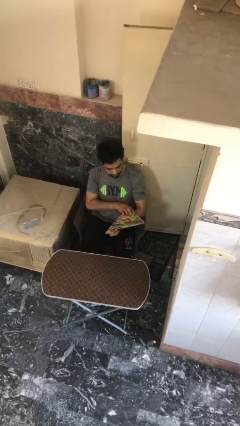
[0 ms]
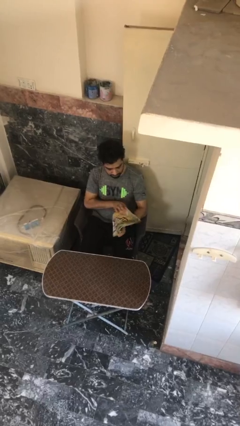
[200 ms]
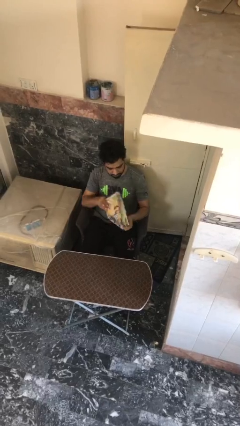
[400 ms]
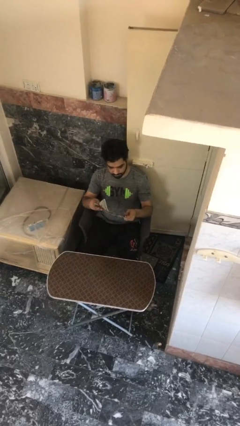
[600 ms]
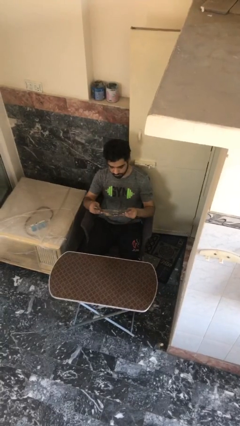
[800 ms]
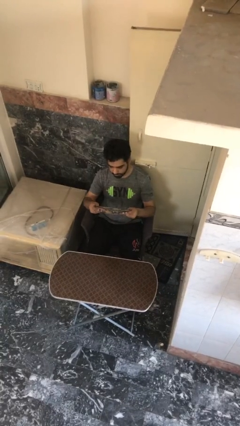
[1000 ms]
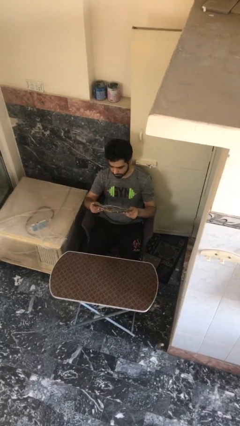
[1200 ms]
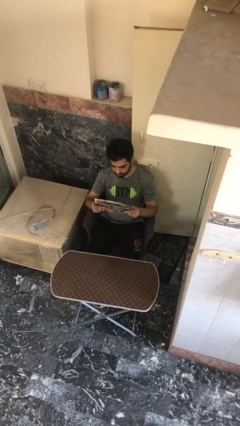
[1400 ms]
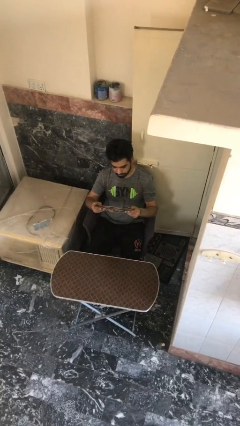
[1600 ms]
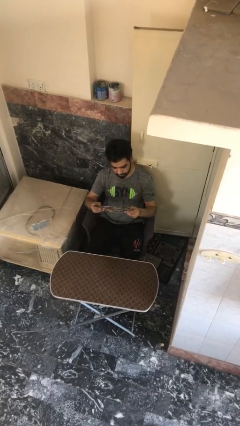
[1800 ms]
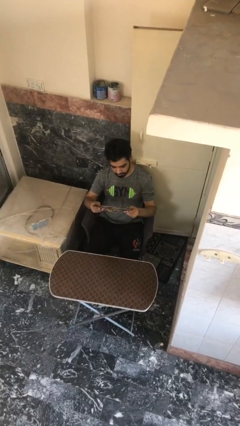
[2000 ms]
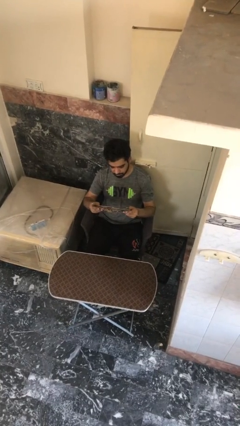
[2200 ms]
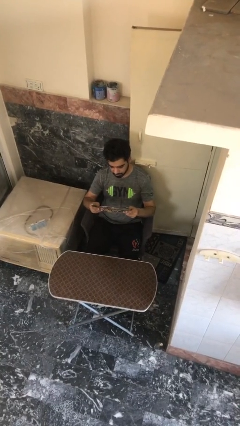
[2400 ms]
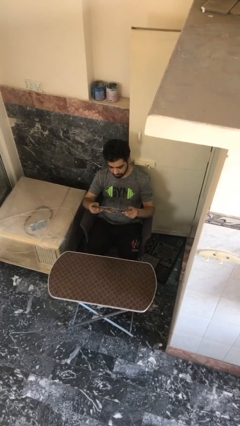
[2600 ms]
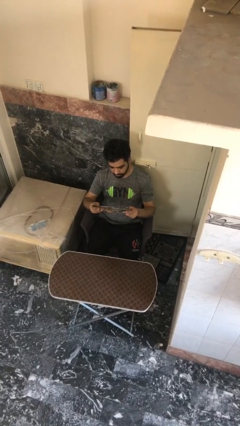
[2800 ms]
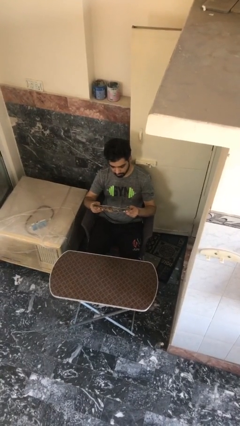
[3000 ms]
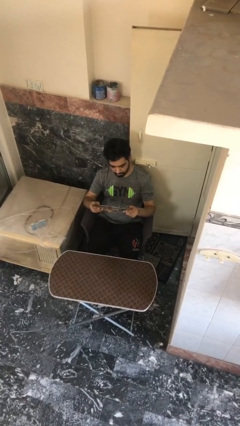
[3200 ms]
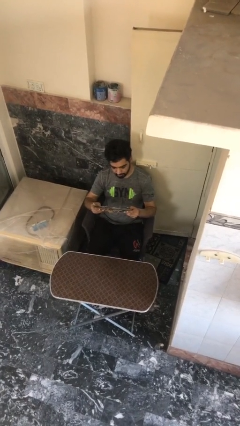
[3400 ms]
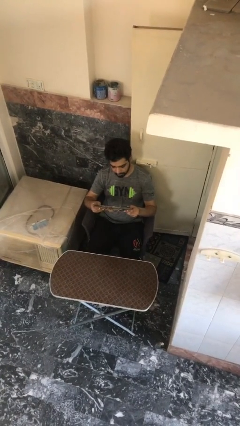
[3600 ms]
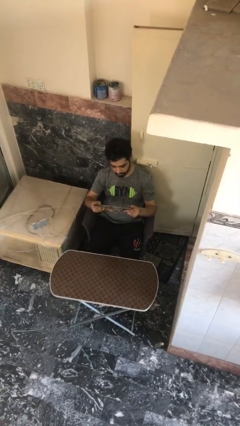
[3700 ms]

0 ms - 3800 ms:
person reads document

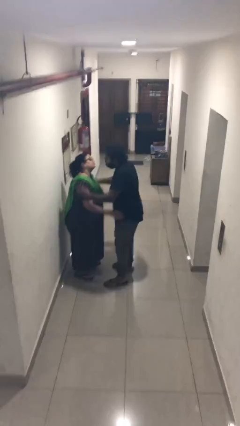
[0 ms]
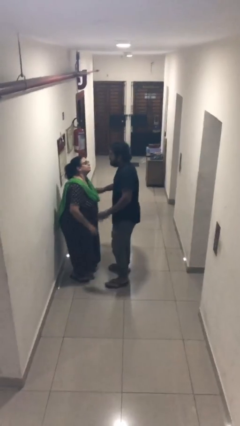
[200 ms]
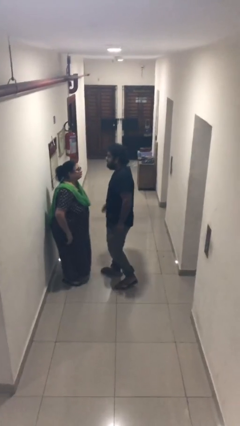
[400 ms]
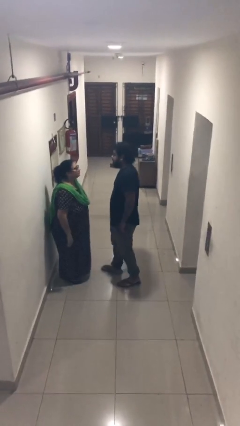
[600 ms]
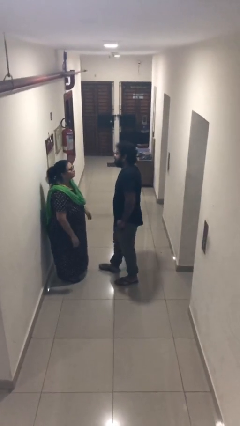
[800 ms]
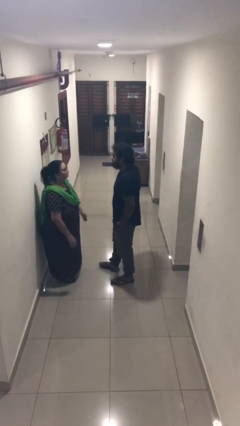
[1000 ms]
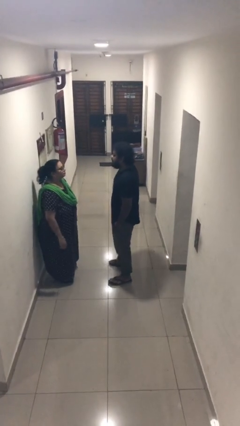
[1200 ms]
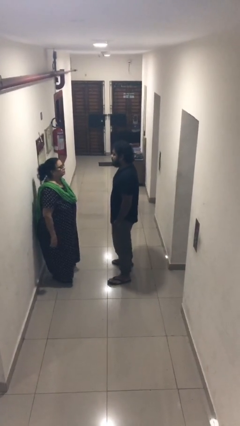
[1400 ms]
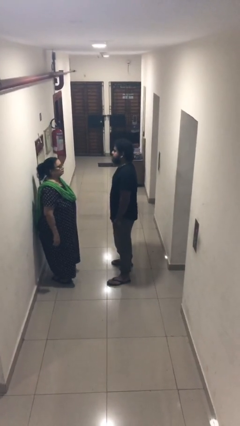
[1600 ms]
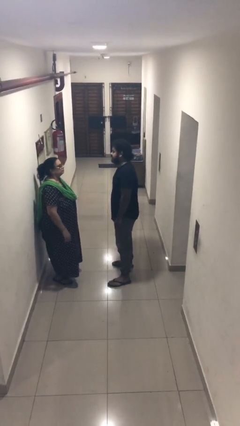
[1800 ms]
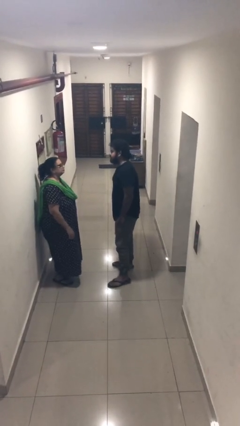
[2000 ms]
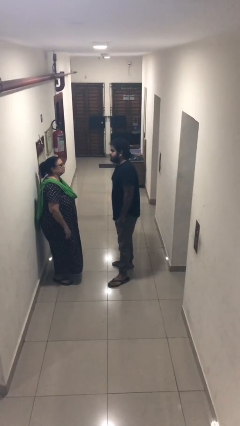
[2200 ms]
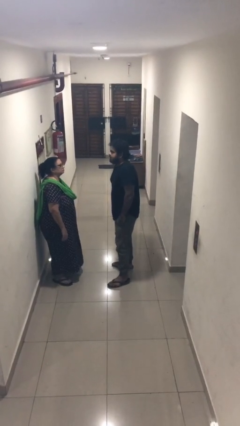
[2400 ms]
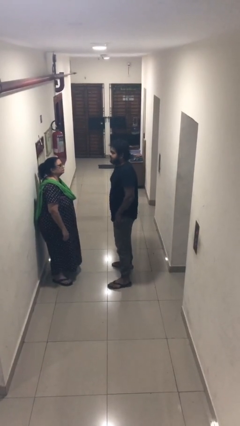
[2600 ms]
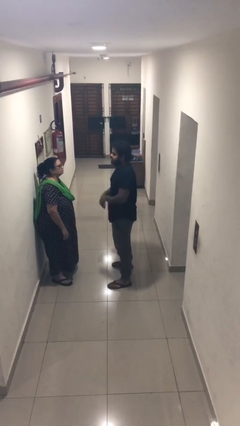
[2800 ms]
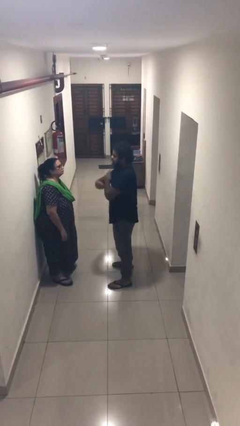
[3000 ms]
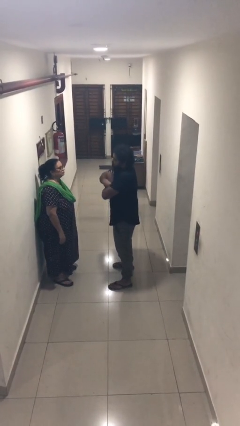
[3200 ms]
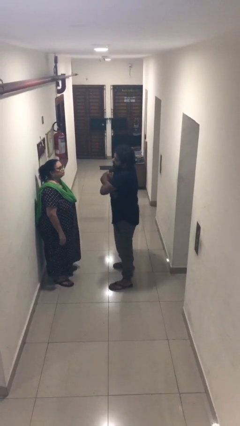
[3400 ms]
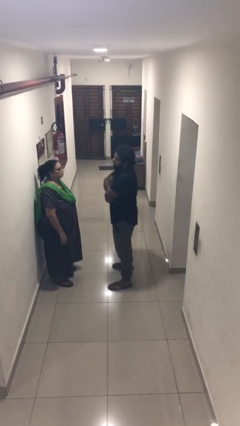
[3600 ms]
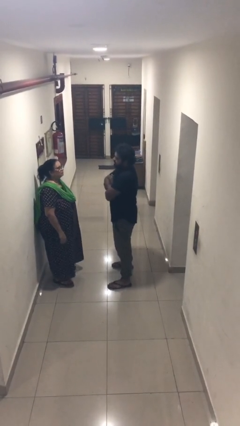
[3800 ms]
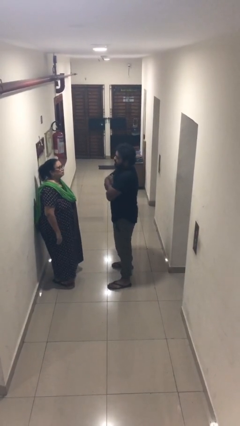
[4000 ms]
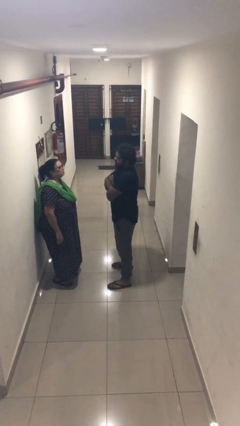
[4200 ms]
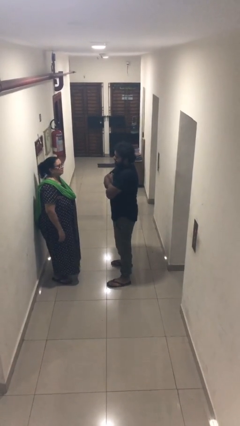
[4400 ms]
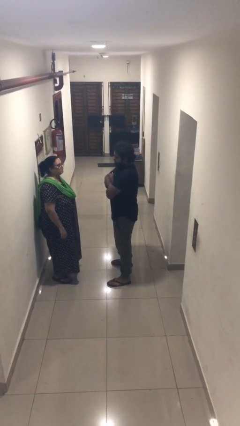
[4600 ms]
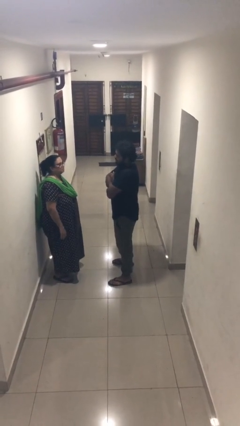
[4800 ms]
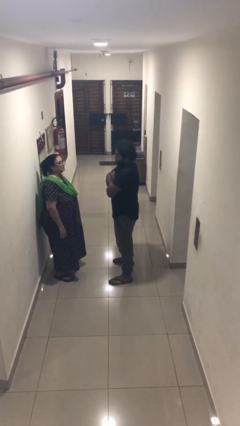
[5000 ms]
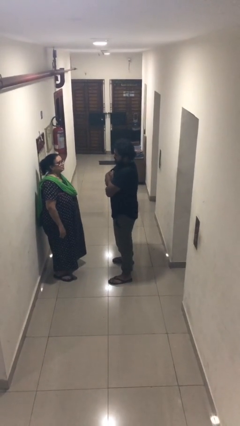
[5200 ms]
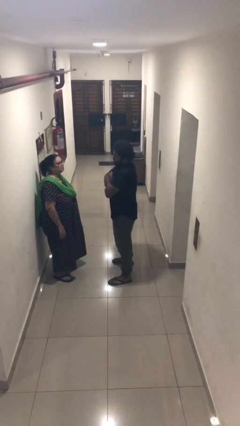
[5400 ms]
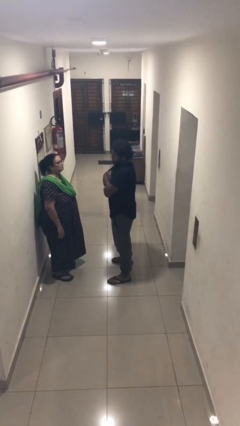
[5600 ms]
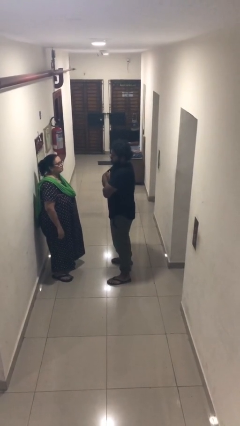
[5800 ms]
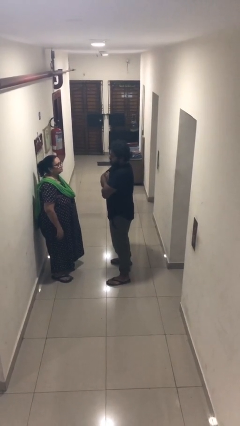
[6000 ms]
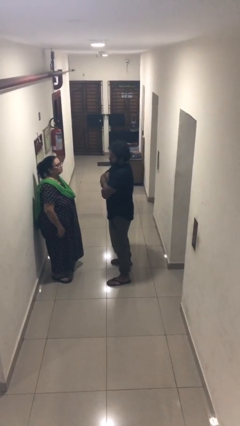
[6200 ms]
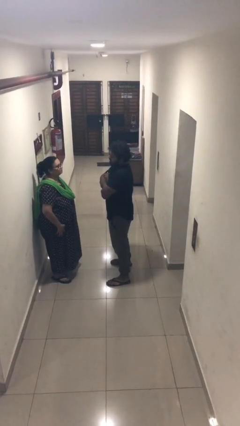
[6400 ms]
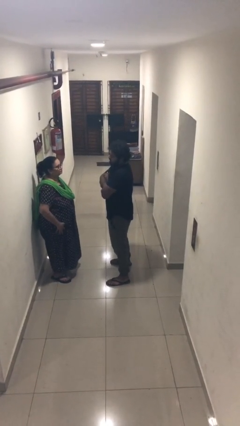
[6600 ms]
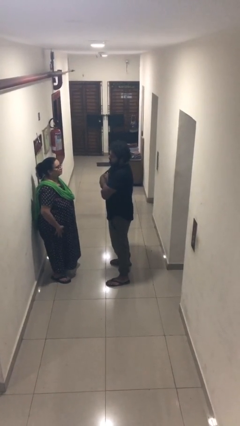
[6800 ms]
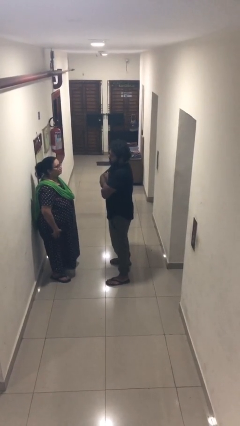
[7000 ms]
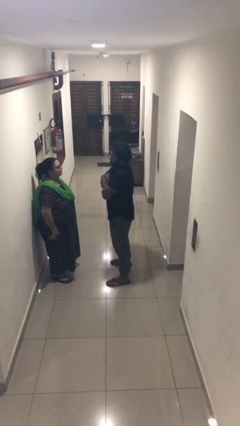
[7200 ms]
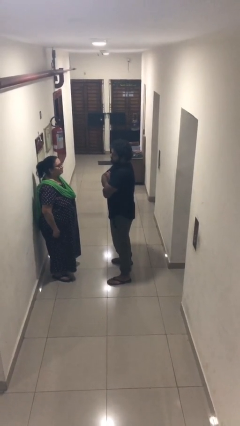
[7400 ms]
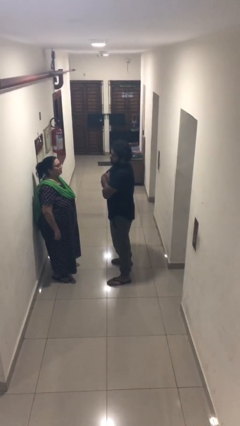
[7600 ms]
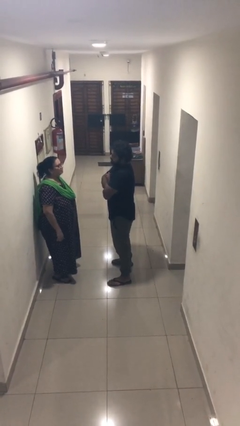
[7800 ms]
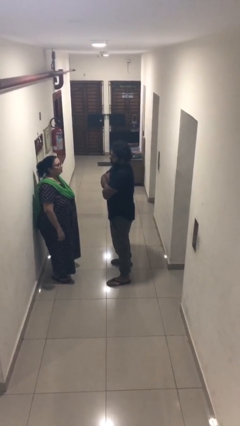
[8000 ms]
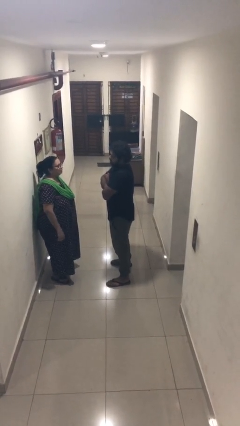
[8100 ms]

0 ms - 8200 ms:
person talks to person

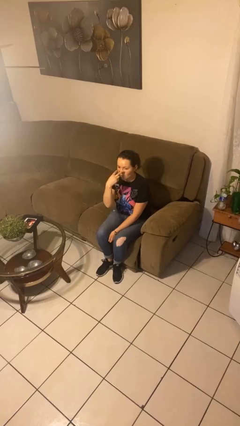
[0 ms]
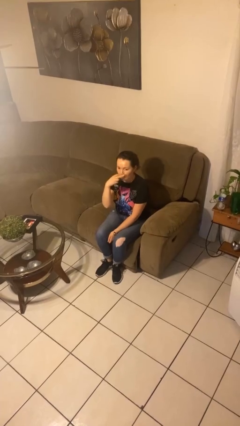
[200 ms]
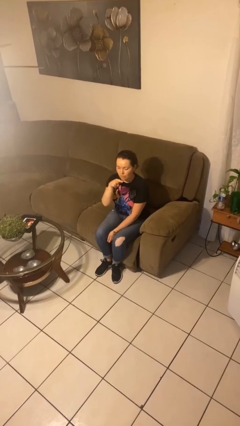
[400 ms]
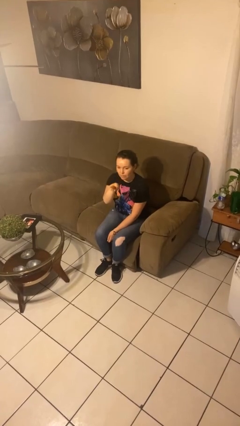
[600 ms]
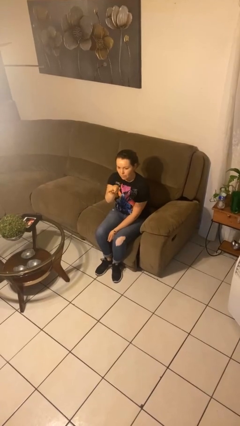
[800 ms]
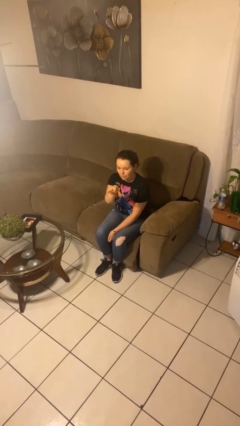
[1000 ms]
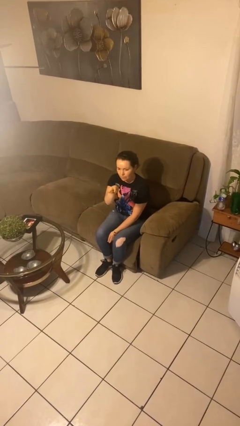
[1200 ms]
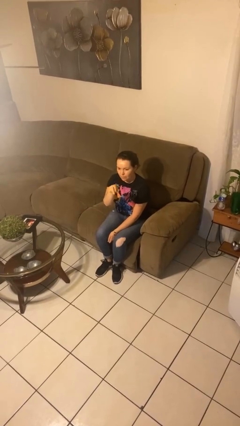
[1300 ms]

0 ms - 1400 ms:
person gestures watch closely

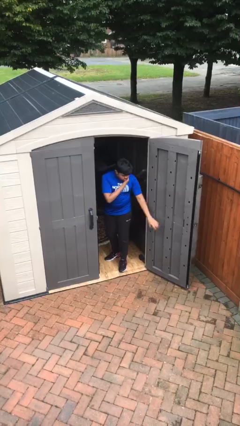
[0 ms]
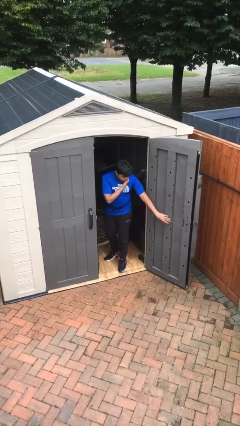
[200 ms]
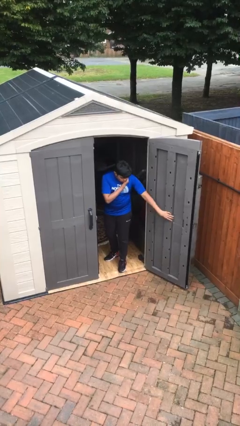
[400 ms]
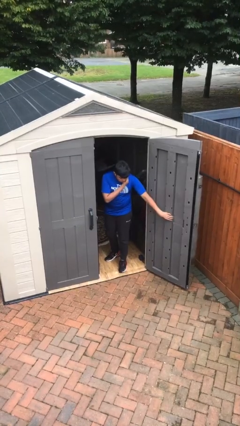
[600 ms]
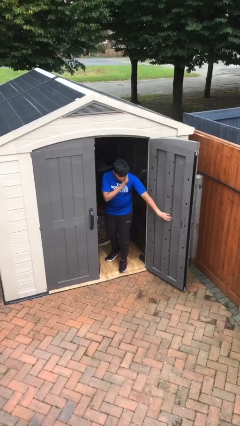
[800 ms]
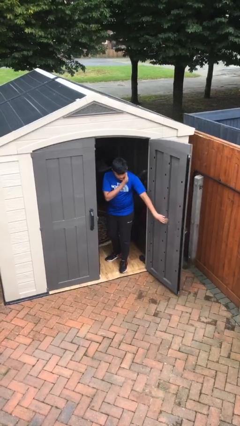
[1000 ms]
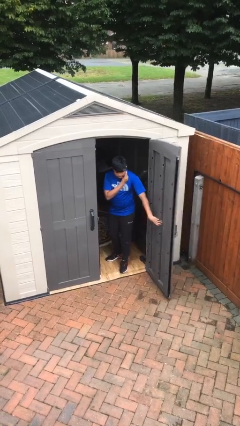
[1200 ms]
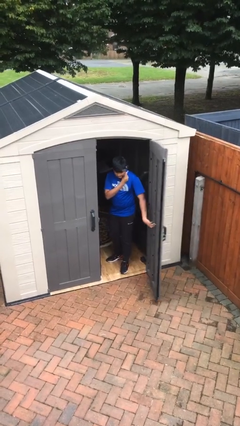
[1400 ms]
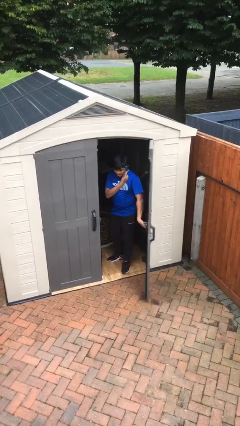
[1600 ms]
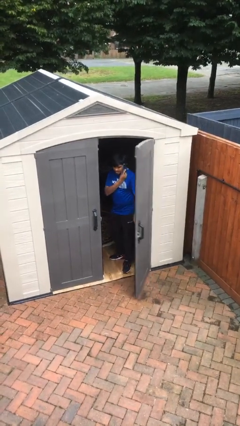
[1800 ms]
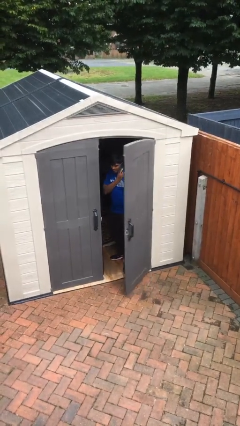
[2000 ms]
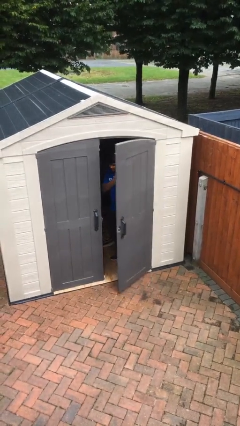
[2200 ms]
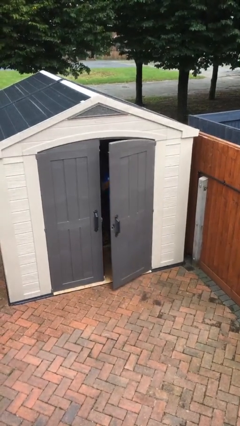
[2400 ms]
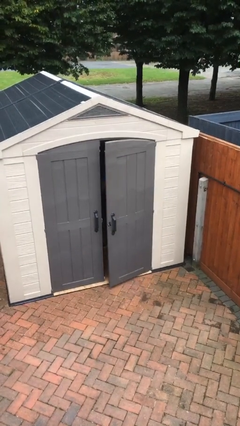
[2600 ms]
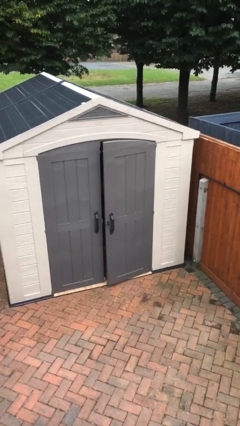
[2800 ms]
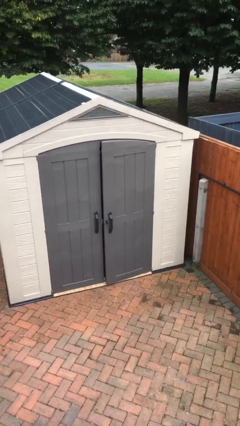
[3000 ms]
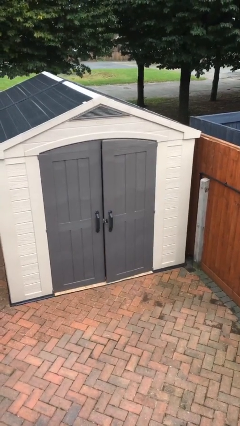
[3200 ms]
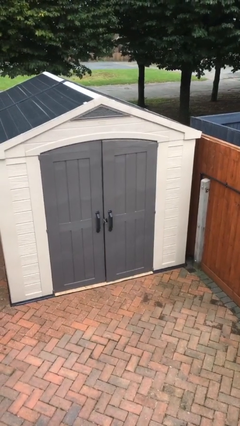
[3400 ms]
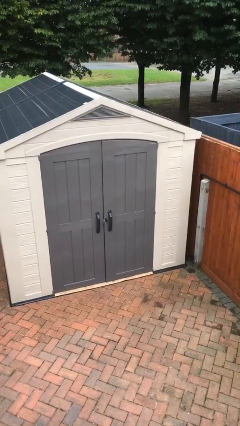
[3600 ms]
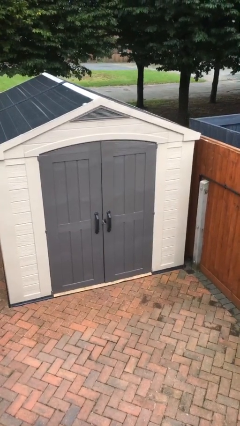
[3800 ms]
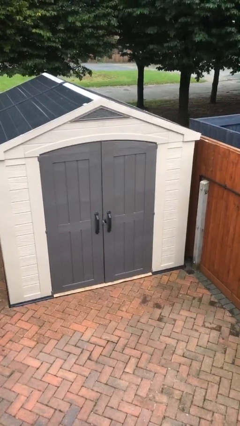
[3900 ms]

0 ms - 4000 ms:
person closes facility door

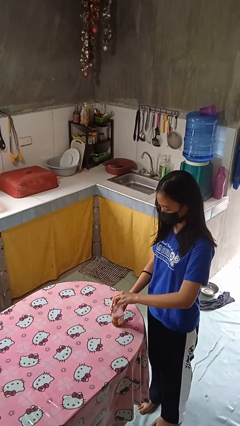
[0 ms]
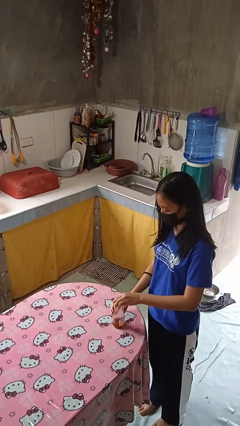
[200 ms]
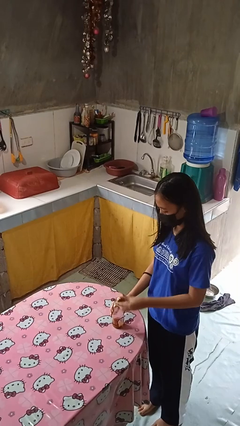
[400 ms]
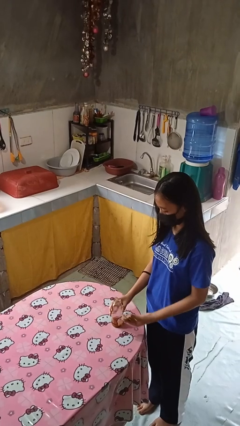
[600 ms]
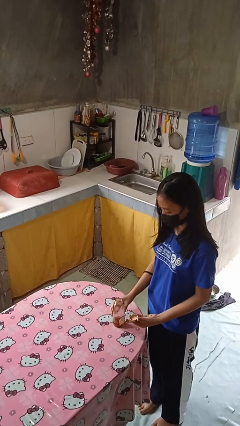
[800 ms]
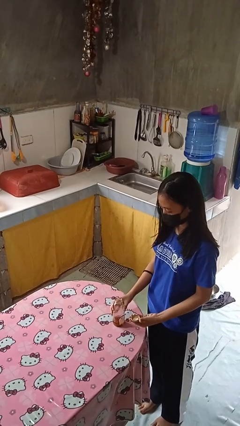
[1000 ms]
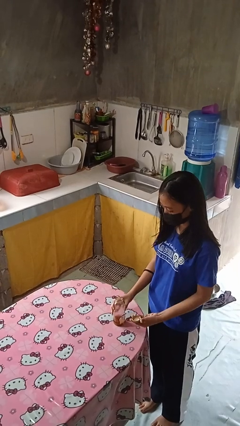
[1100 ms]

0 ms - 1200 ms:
person opens jar
